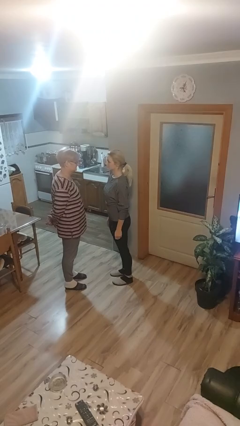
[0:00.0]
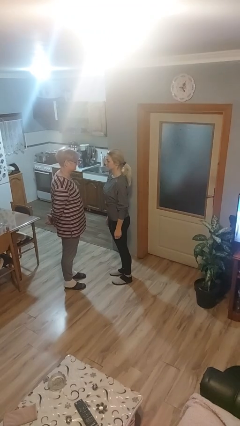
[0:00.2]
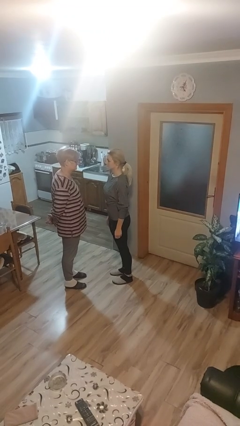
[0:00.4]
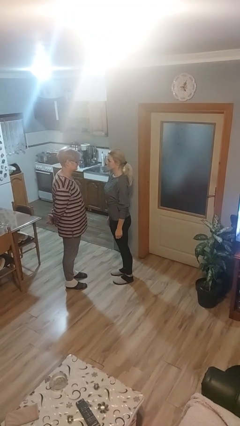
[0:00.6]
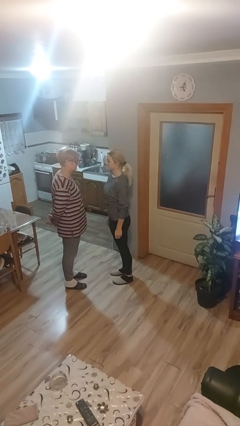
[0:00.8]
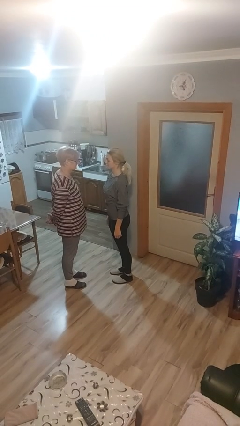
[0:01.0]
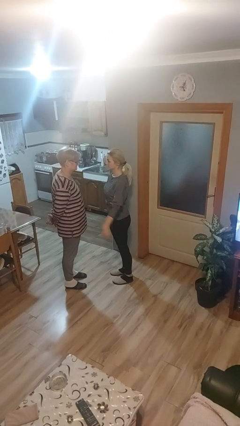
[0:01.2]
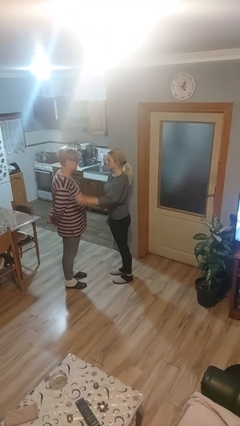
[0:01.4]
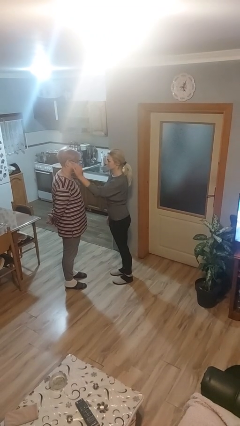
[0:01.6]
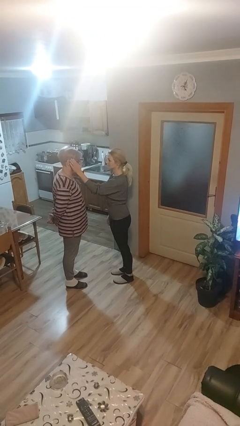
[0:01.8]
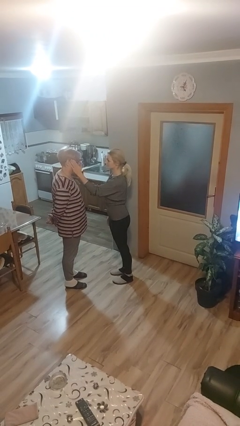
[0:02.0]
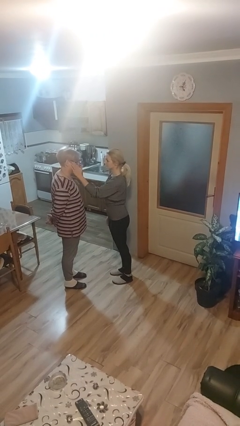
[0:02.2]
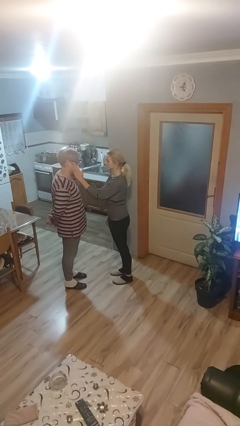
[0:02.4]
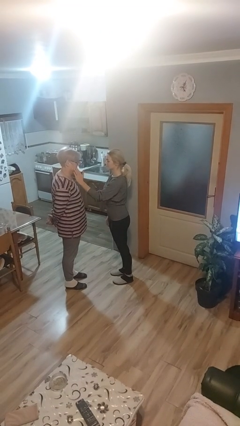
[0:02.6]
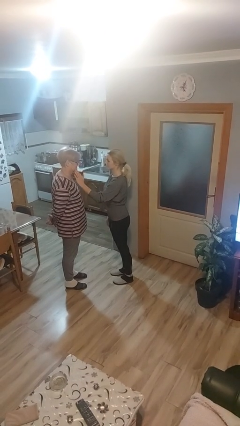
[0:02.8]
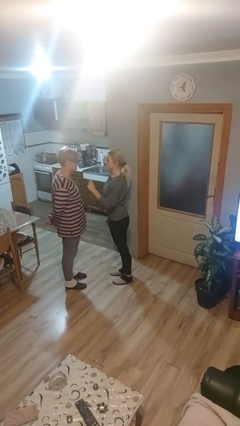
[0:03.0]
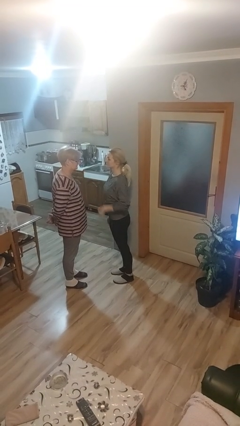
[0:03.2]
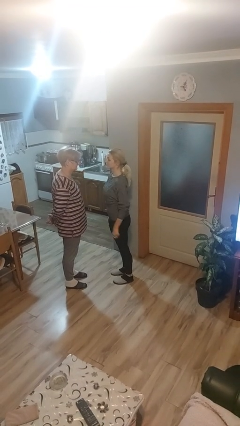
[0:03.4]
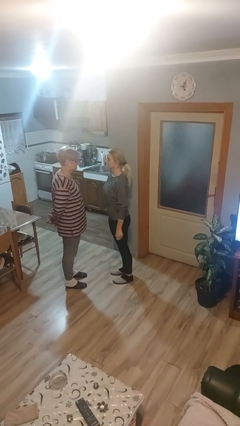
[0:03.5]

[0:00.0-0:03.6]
person touches face of person

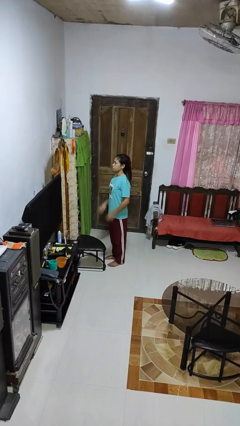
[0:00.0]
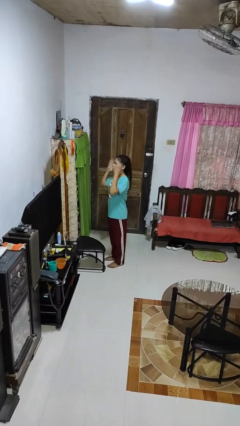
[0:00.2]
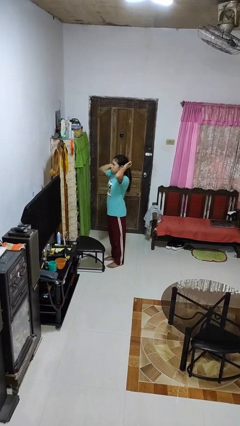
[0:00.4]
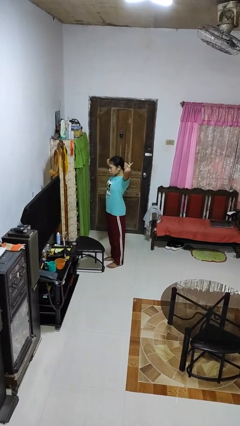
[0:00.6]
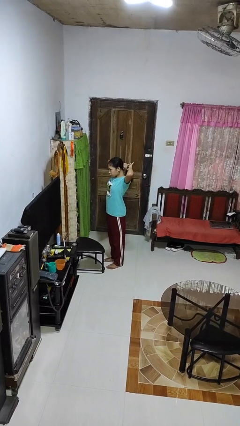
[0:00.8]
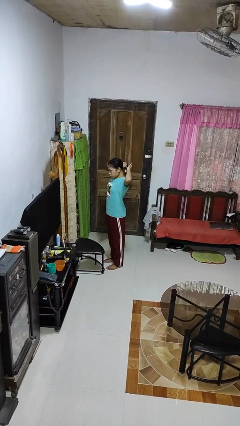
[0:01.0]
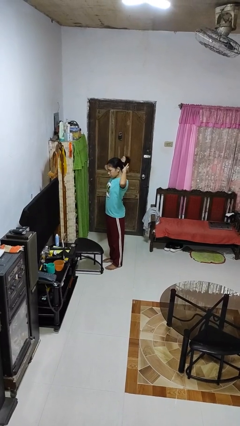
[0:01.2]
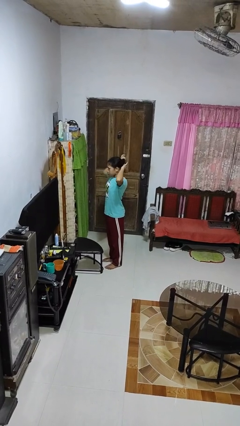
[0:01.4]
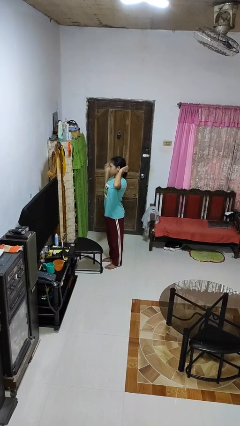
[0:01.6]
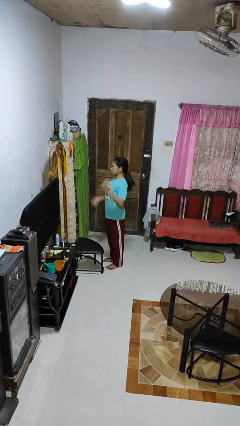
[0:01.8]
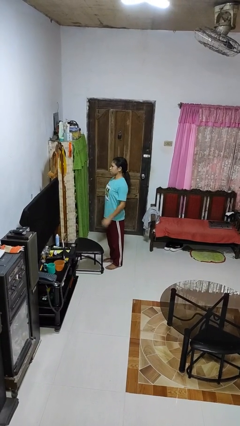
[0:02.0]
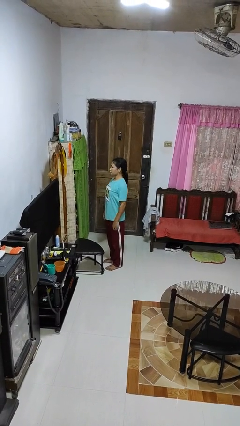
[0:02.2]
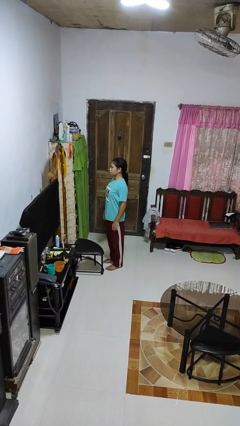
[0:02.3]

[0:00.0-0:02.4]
person puts hair in ponytail

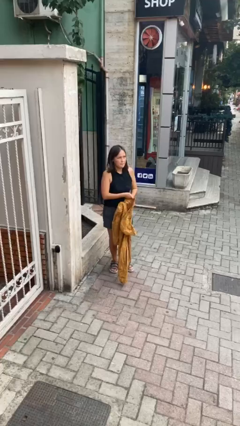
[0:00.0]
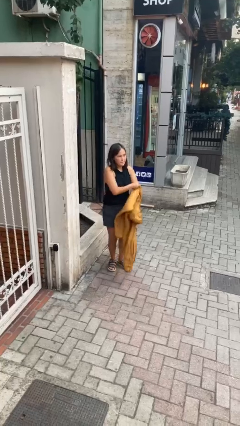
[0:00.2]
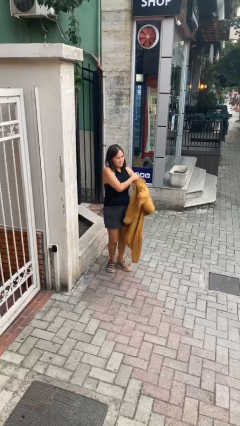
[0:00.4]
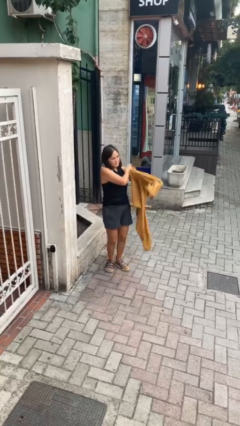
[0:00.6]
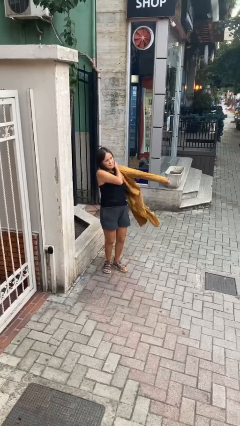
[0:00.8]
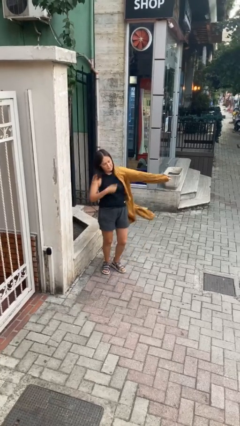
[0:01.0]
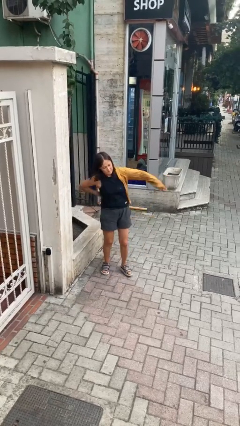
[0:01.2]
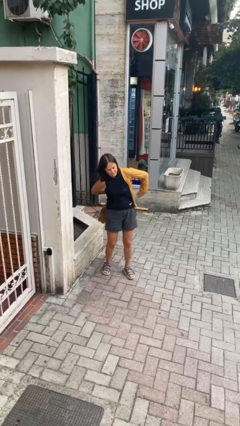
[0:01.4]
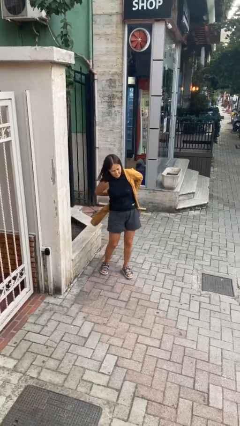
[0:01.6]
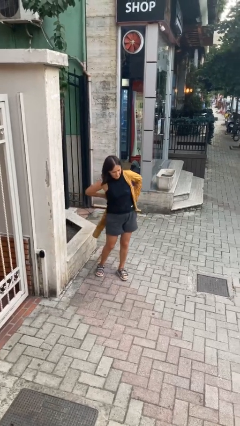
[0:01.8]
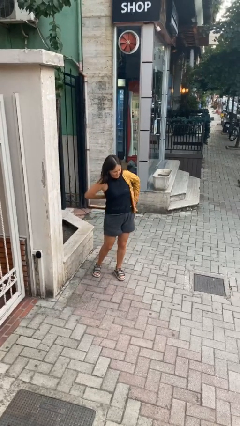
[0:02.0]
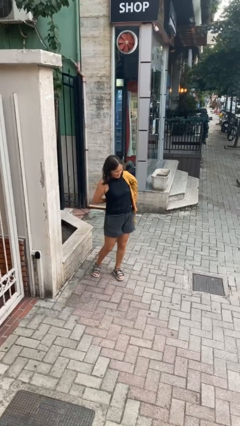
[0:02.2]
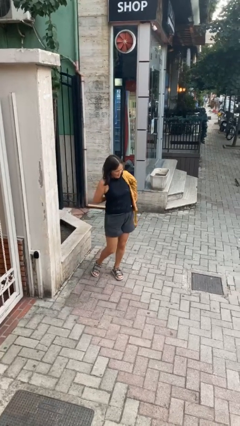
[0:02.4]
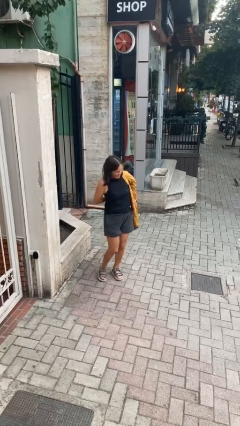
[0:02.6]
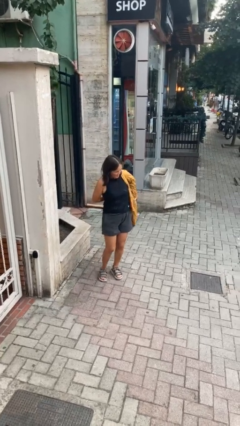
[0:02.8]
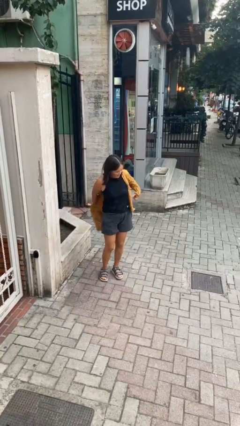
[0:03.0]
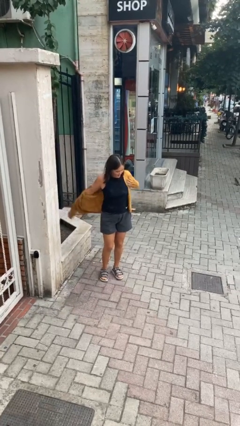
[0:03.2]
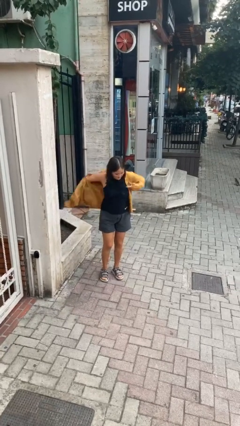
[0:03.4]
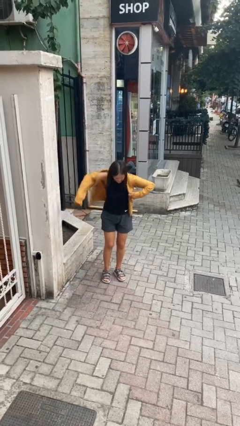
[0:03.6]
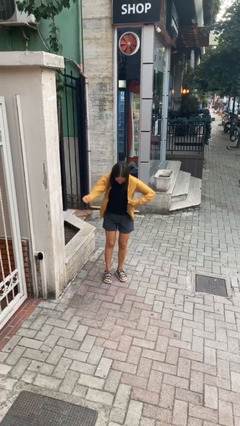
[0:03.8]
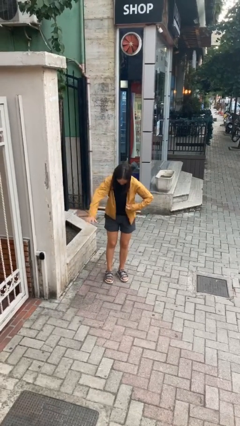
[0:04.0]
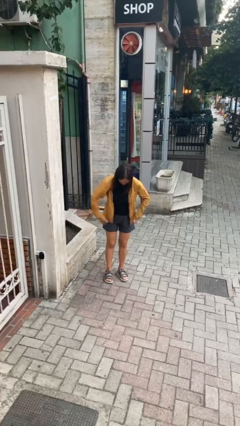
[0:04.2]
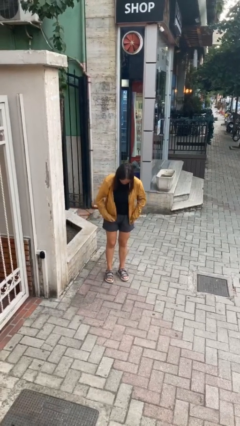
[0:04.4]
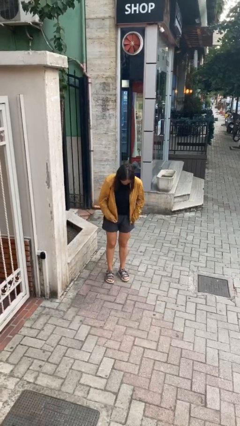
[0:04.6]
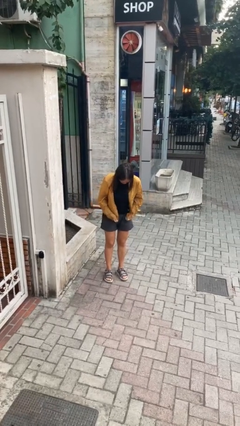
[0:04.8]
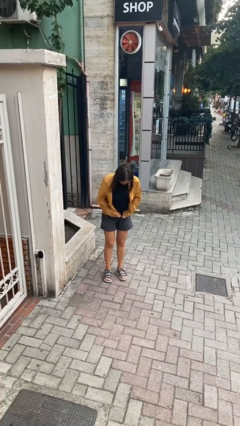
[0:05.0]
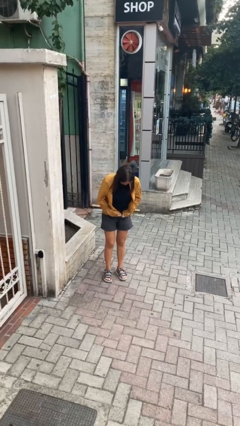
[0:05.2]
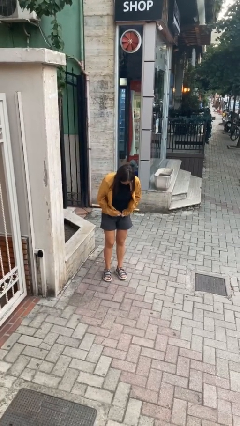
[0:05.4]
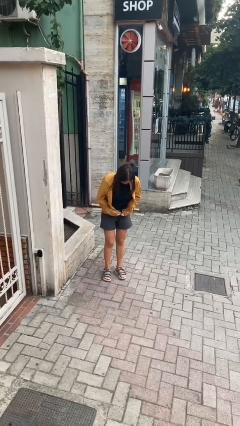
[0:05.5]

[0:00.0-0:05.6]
person puts on jacket

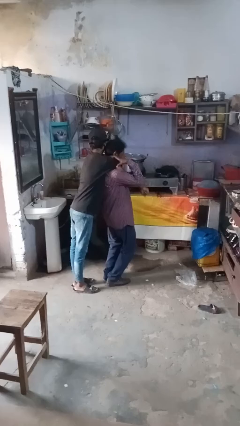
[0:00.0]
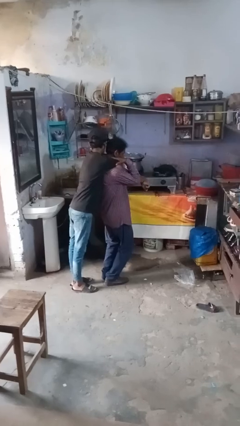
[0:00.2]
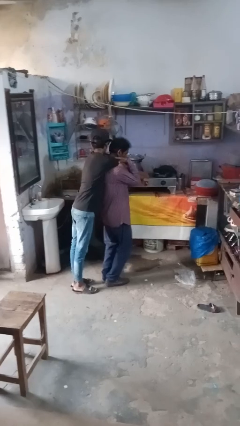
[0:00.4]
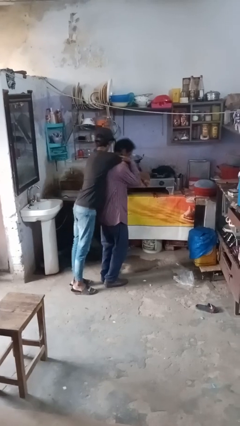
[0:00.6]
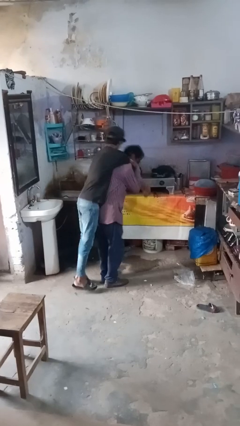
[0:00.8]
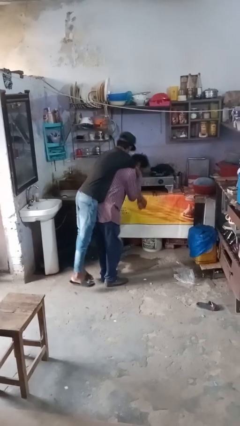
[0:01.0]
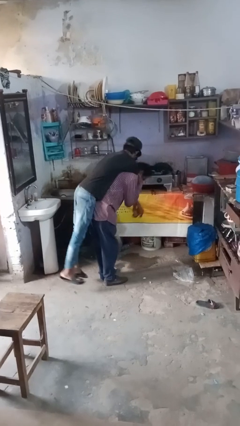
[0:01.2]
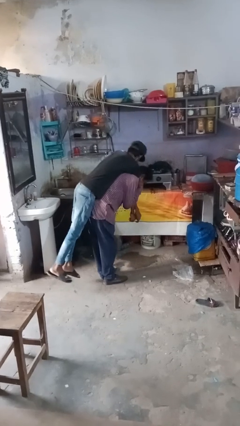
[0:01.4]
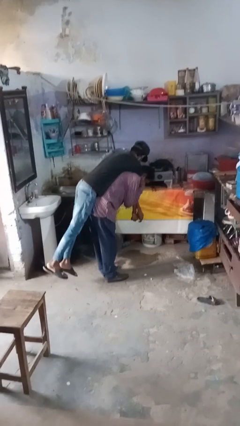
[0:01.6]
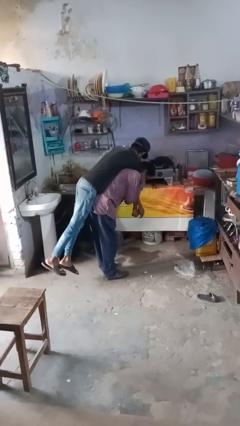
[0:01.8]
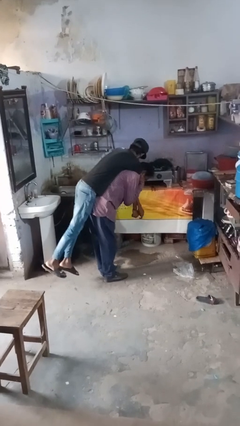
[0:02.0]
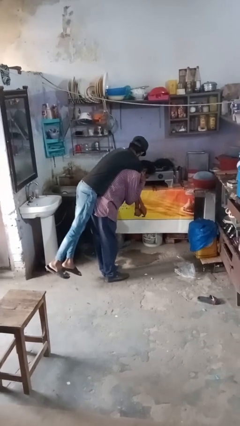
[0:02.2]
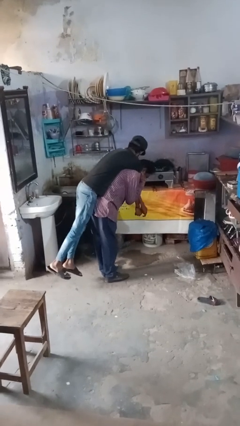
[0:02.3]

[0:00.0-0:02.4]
person carries person on back

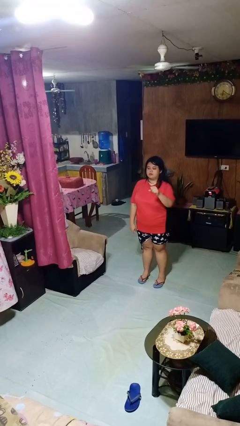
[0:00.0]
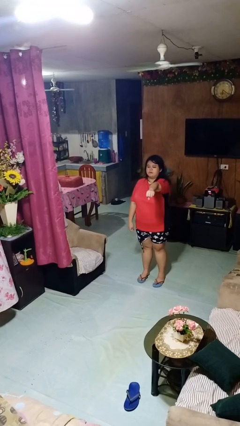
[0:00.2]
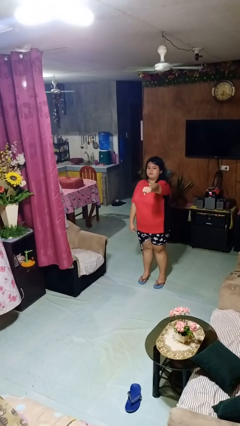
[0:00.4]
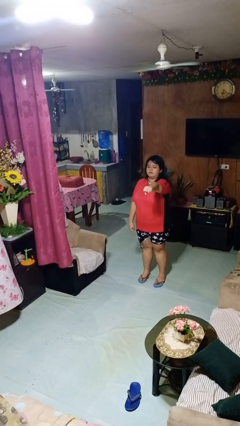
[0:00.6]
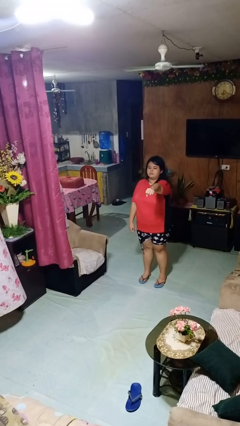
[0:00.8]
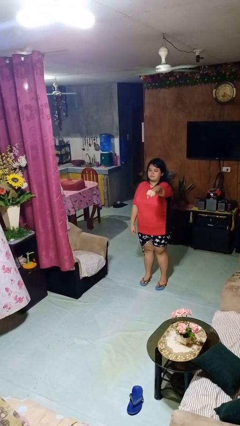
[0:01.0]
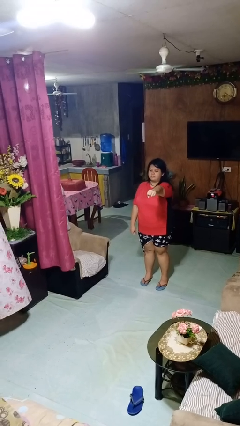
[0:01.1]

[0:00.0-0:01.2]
person punches

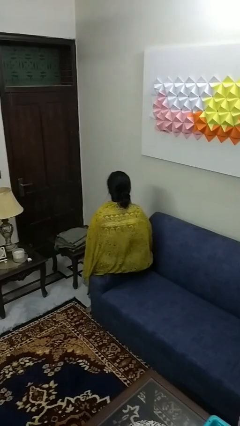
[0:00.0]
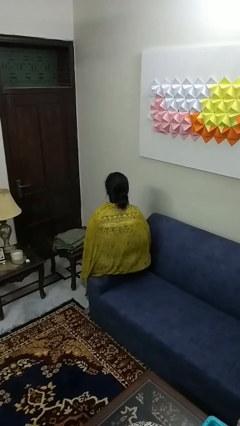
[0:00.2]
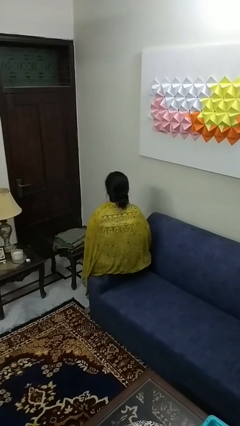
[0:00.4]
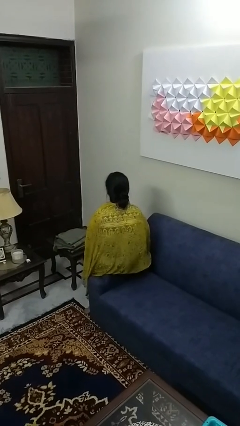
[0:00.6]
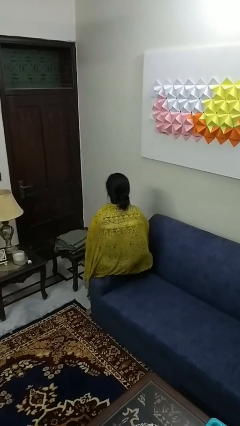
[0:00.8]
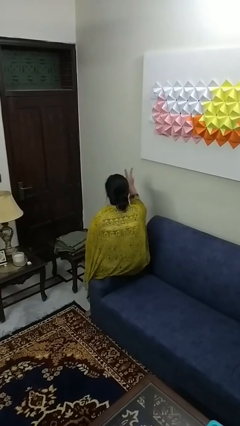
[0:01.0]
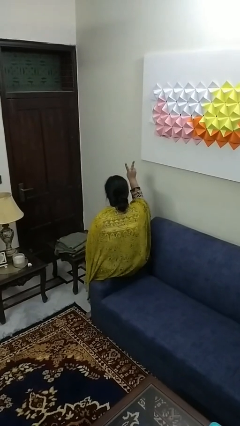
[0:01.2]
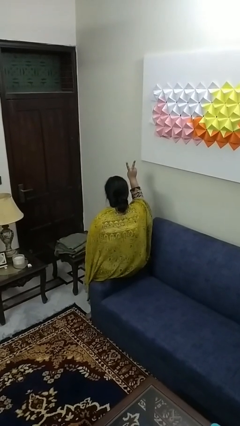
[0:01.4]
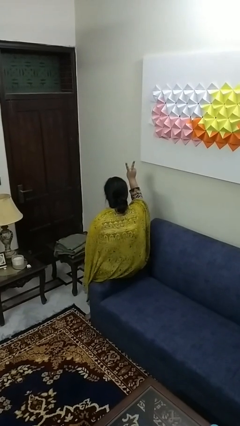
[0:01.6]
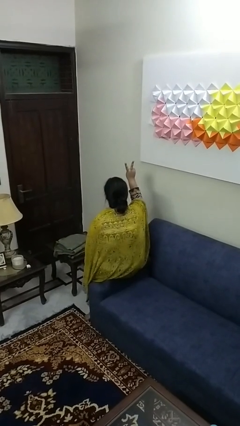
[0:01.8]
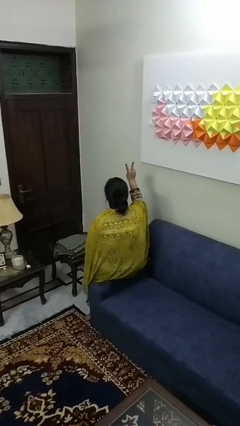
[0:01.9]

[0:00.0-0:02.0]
person gestures peace
